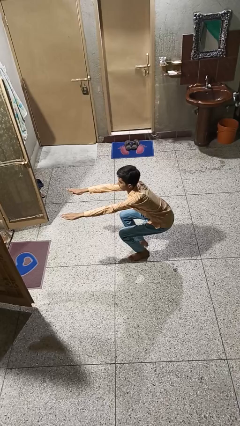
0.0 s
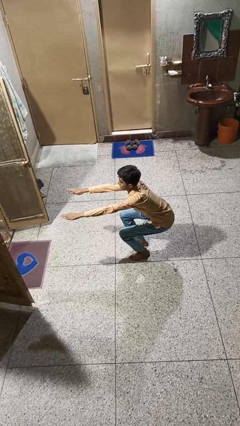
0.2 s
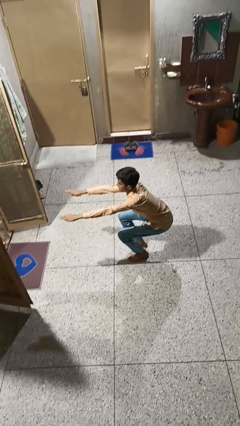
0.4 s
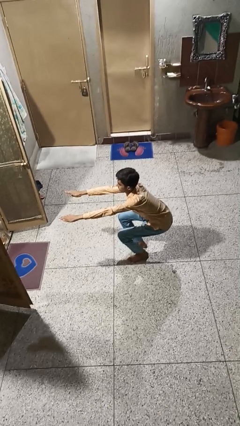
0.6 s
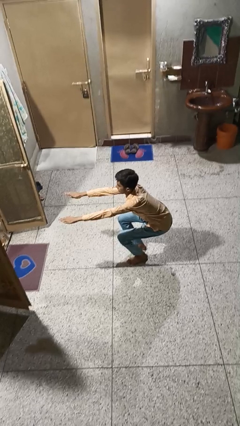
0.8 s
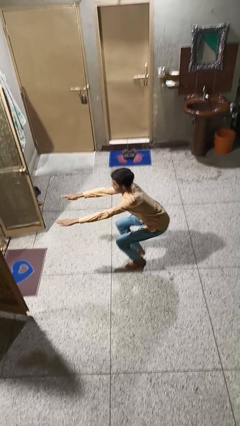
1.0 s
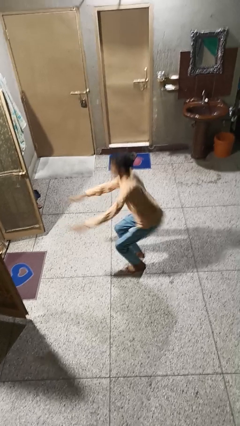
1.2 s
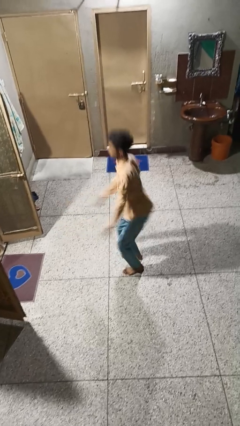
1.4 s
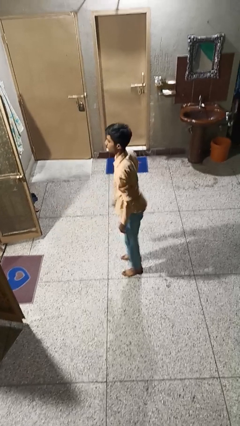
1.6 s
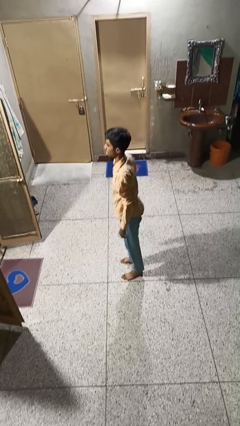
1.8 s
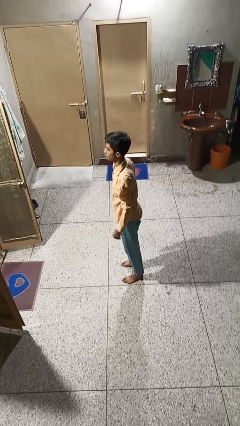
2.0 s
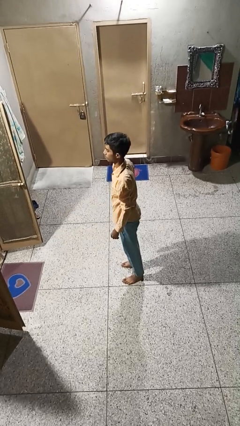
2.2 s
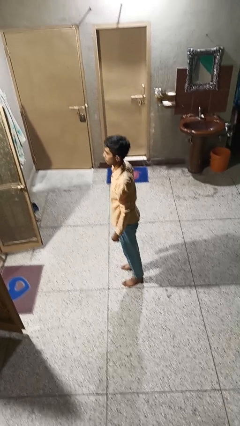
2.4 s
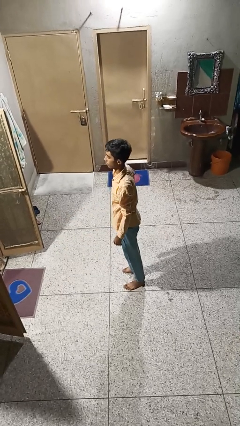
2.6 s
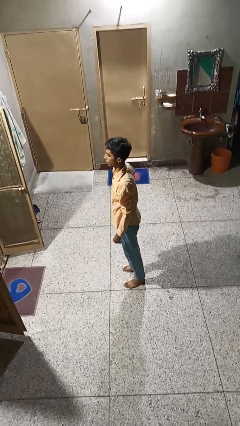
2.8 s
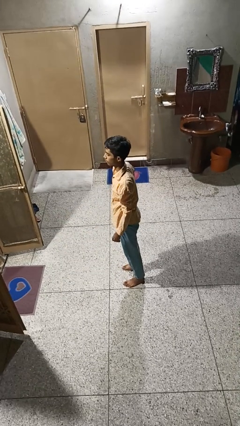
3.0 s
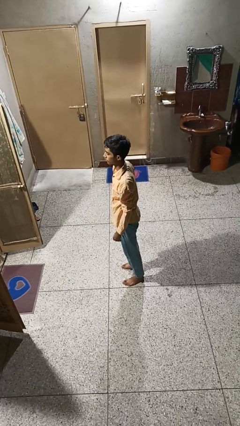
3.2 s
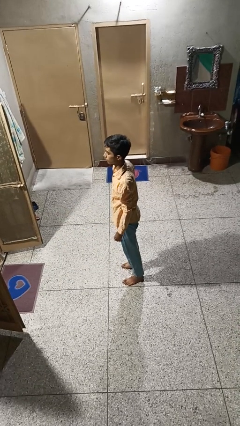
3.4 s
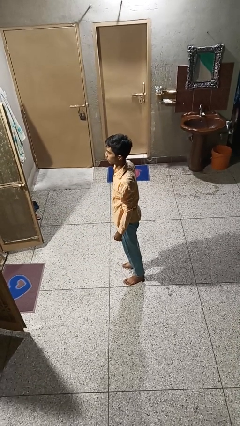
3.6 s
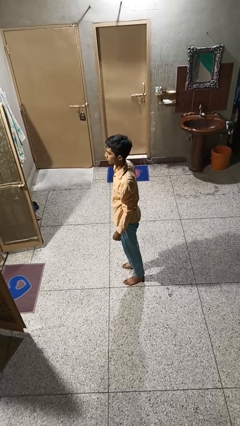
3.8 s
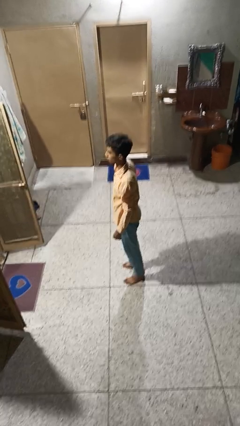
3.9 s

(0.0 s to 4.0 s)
person stands up

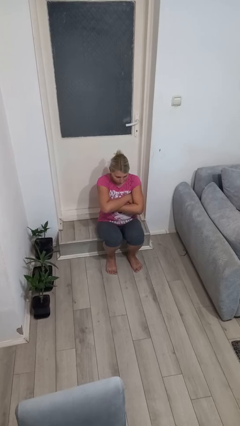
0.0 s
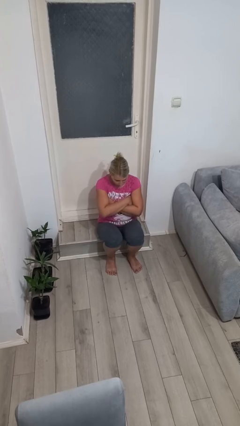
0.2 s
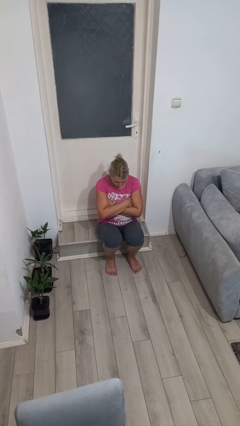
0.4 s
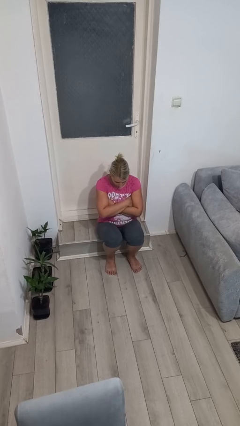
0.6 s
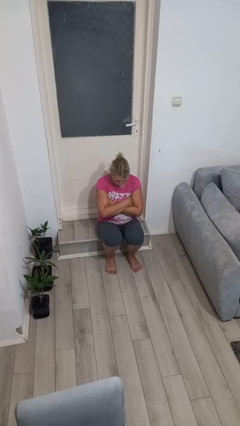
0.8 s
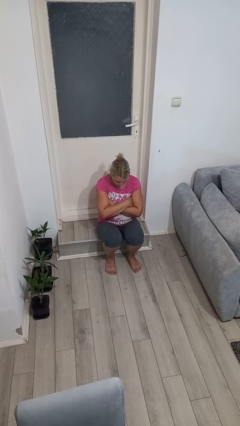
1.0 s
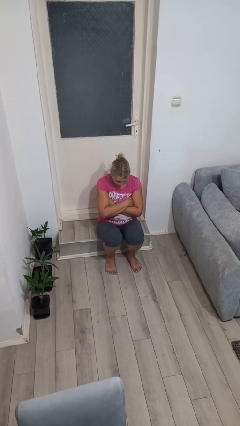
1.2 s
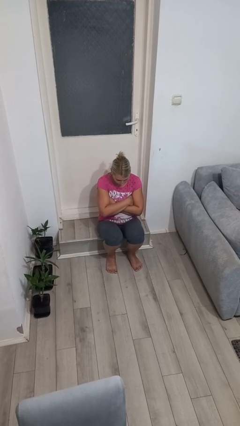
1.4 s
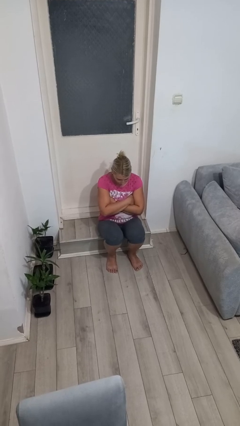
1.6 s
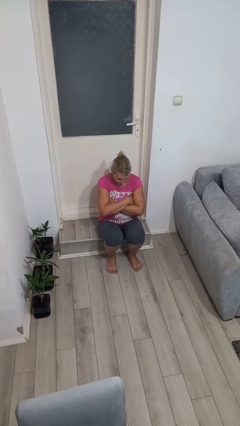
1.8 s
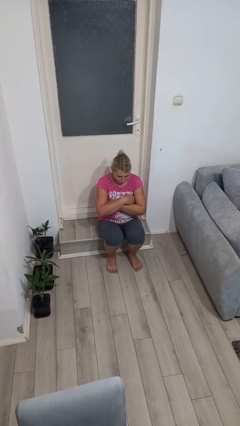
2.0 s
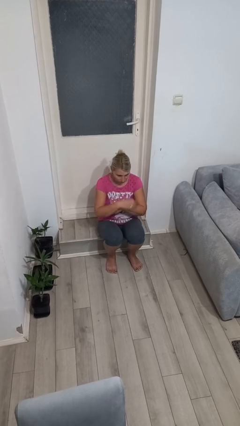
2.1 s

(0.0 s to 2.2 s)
person crosses arms

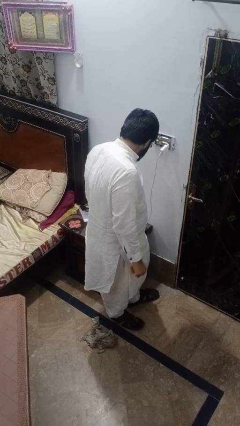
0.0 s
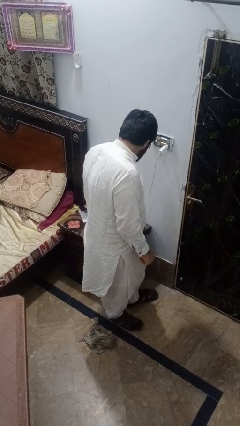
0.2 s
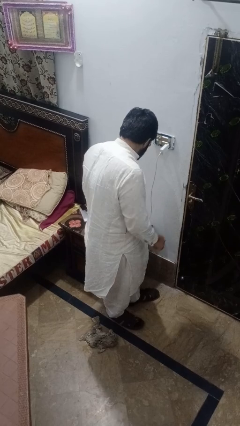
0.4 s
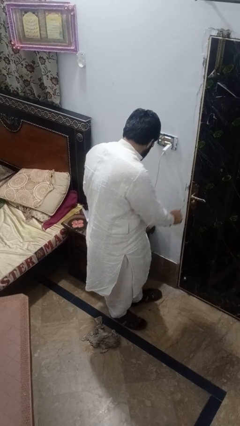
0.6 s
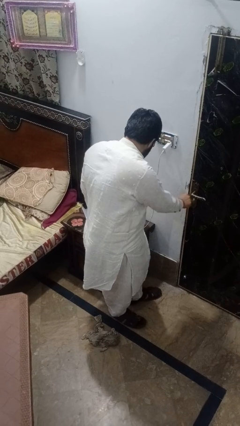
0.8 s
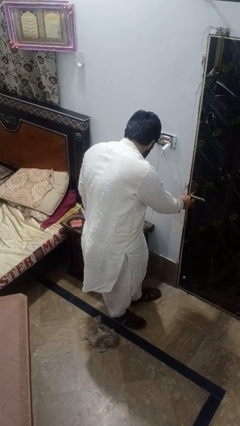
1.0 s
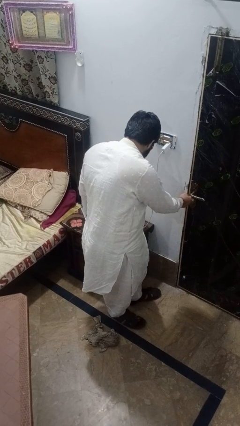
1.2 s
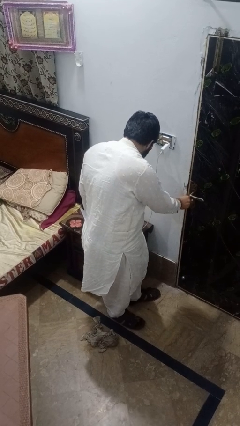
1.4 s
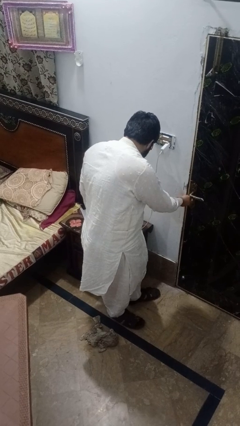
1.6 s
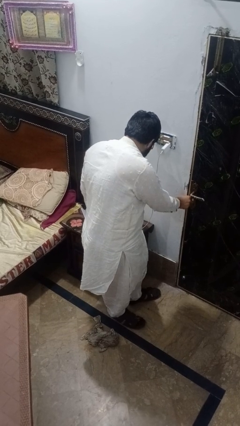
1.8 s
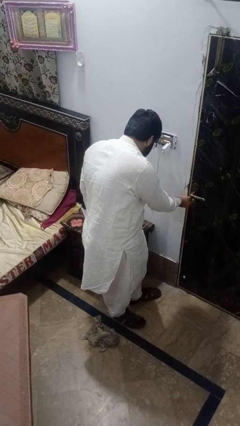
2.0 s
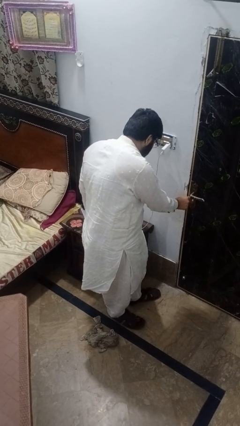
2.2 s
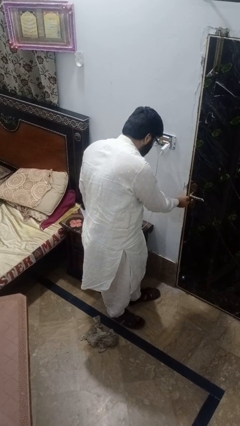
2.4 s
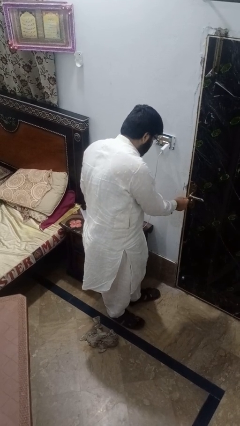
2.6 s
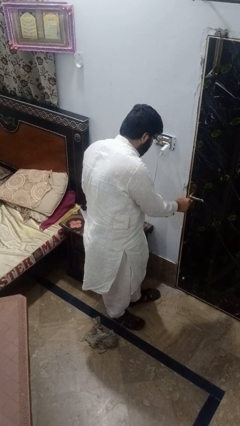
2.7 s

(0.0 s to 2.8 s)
person unlocks door with keys

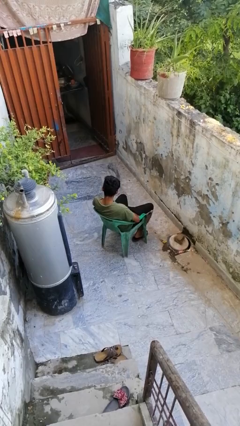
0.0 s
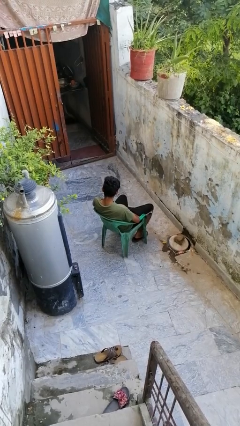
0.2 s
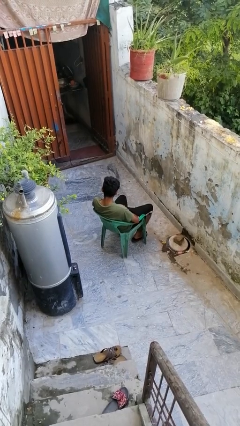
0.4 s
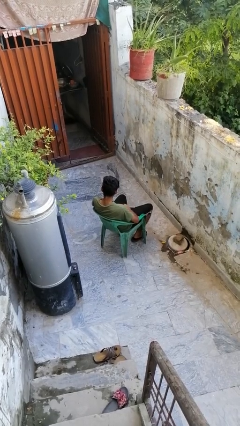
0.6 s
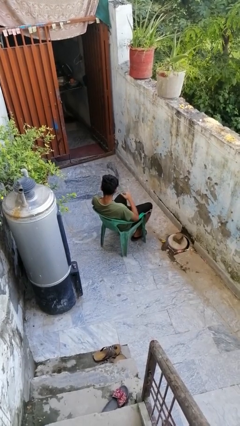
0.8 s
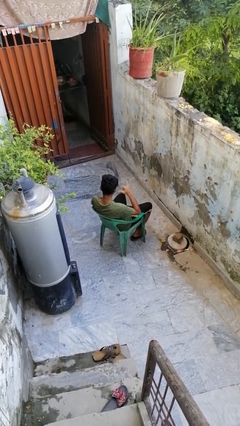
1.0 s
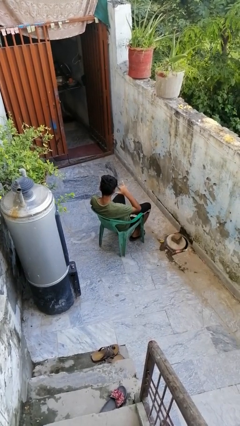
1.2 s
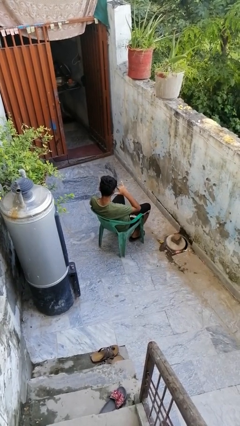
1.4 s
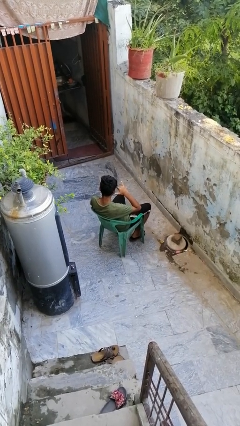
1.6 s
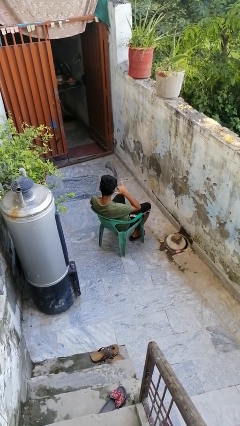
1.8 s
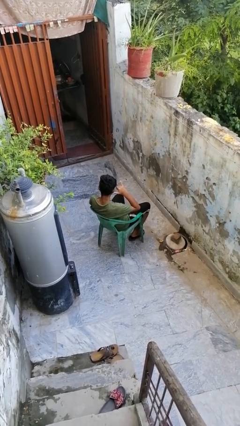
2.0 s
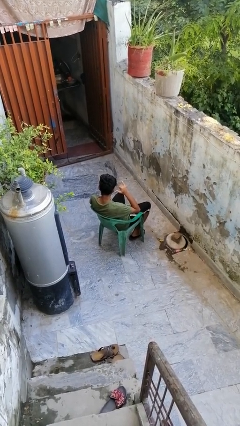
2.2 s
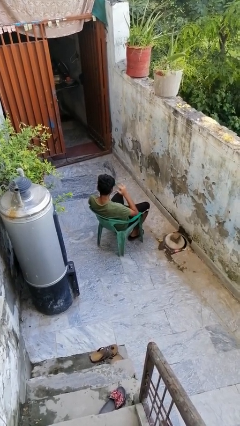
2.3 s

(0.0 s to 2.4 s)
person gestures call me

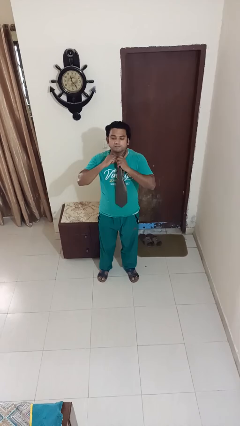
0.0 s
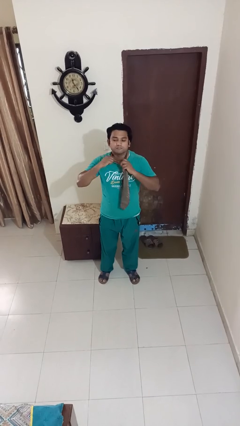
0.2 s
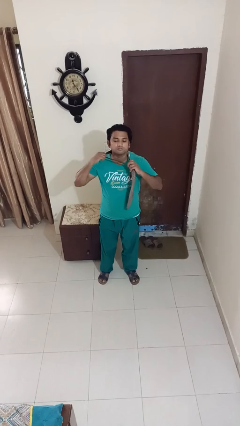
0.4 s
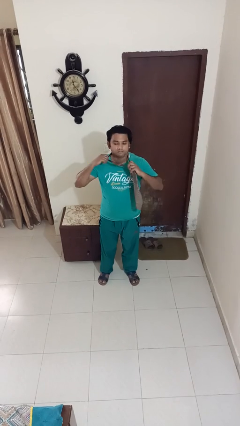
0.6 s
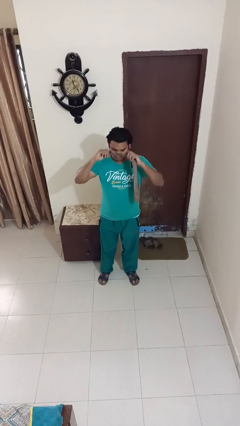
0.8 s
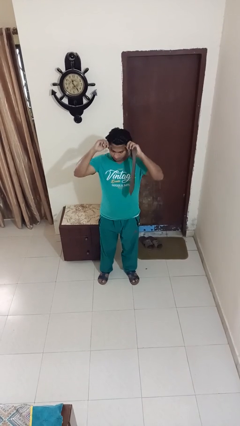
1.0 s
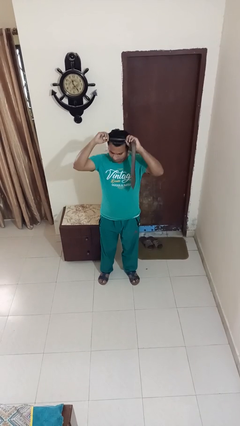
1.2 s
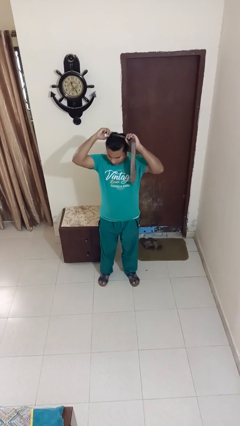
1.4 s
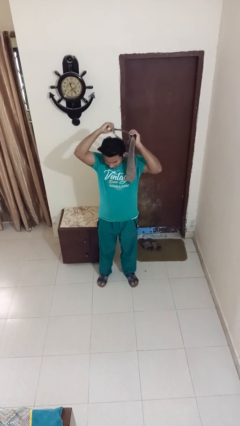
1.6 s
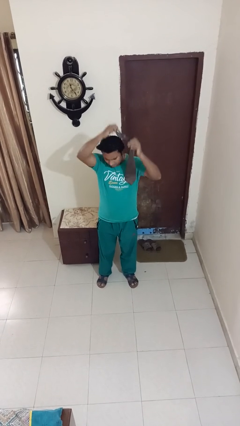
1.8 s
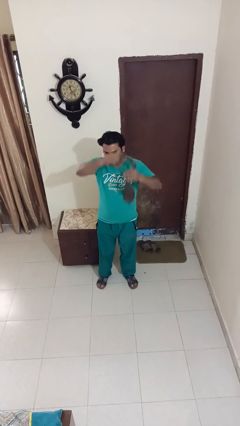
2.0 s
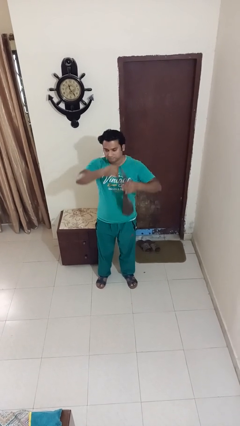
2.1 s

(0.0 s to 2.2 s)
person takes off necktie

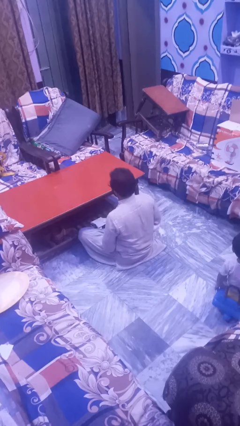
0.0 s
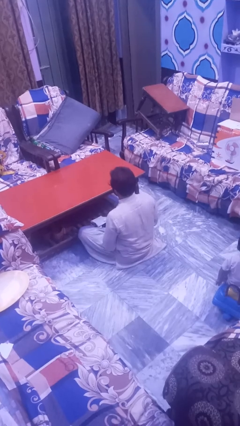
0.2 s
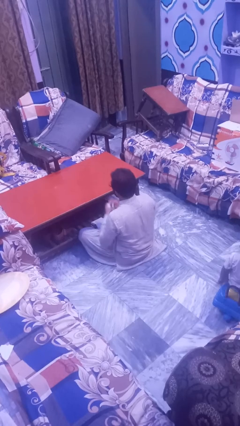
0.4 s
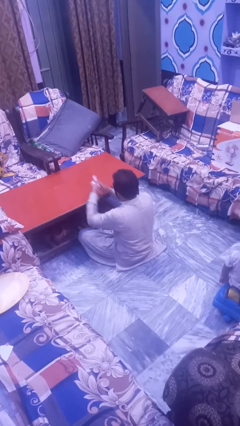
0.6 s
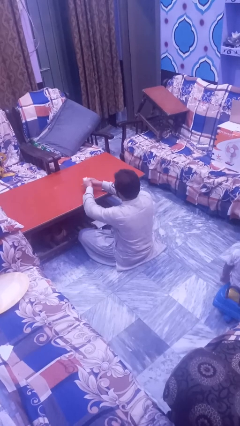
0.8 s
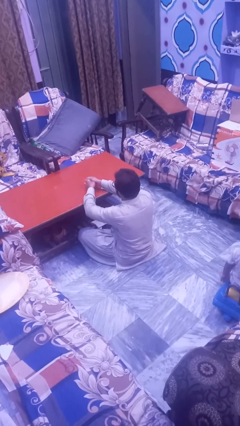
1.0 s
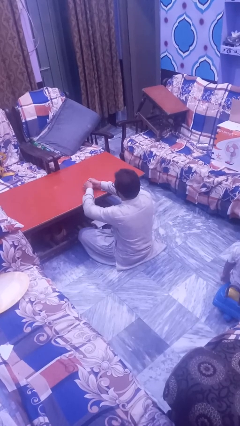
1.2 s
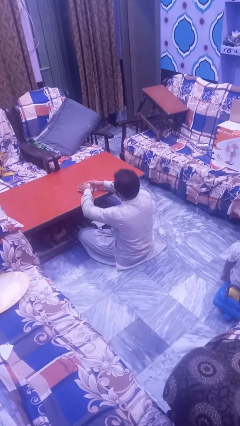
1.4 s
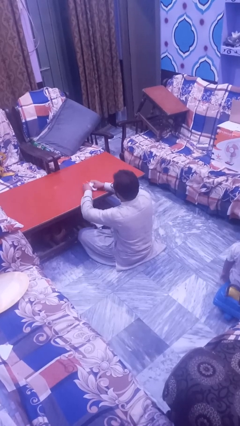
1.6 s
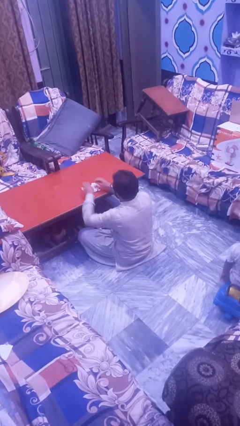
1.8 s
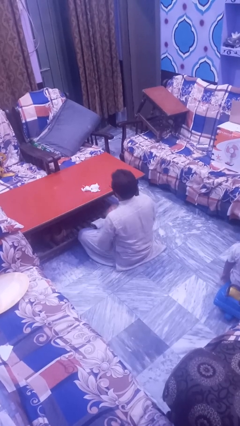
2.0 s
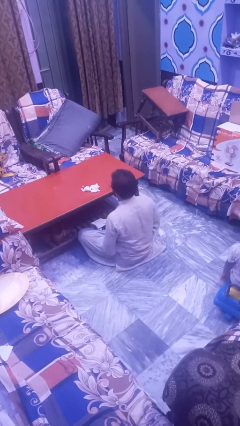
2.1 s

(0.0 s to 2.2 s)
person crumples paper

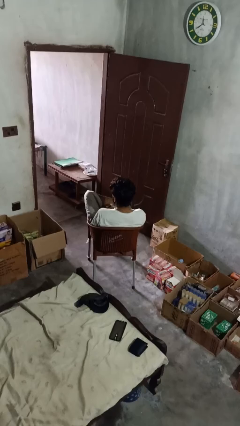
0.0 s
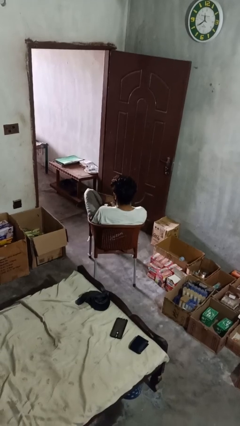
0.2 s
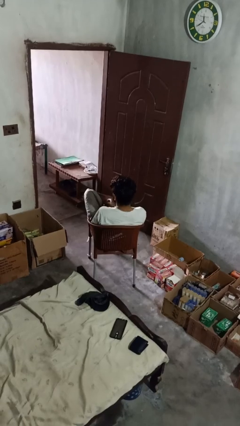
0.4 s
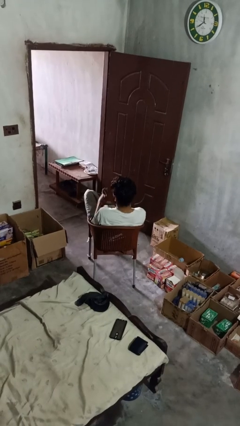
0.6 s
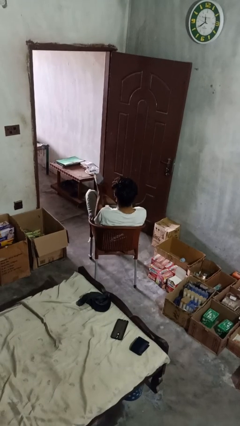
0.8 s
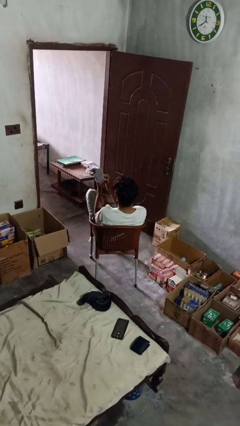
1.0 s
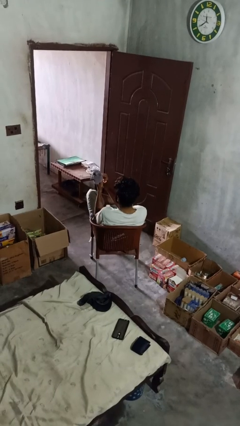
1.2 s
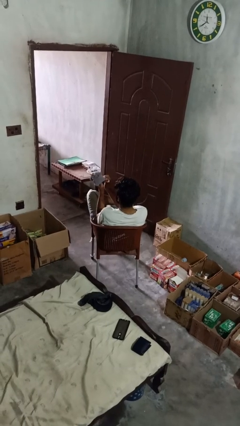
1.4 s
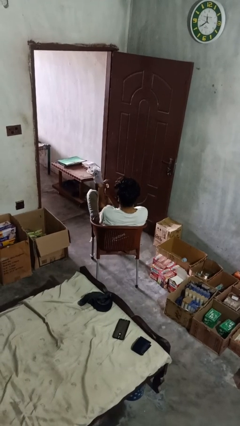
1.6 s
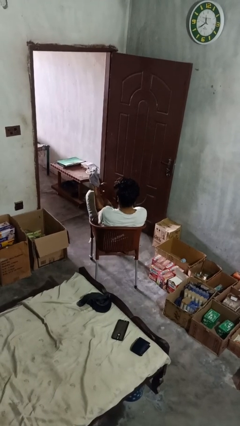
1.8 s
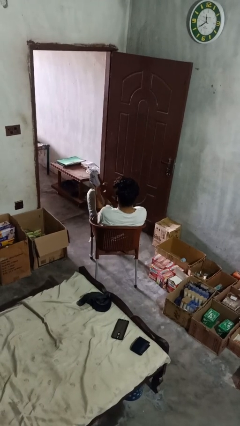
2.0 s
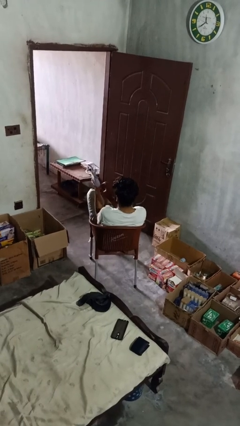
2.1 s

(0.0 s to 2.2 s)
person puts on gloves
